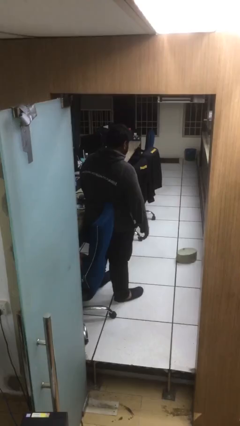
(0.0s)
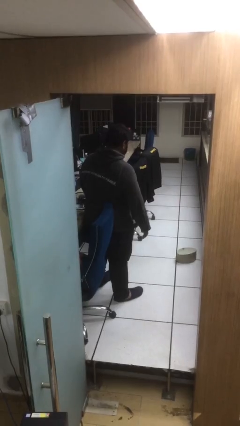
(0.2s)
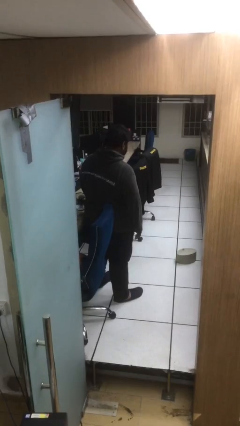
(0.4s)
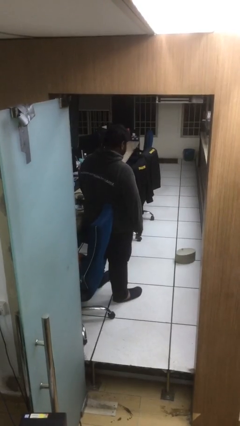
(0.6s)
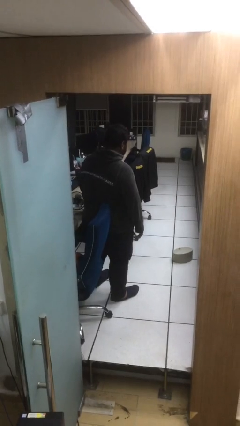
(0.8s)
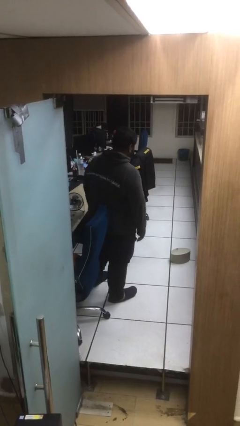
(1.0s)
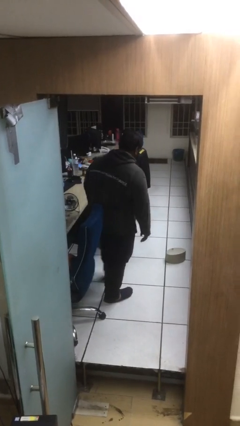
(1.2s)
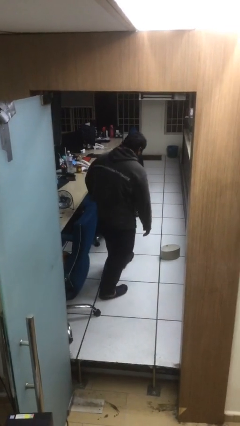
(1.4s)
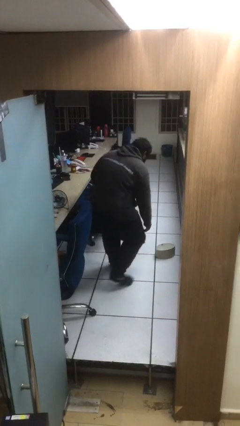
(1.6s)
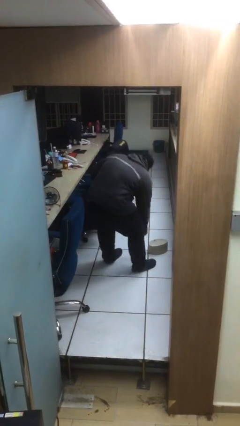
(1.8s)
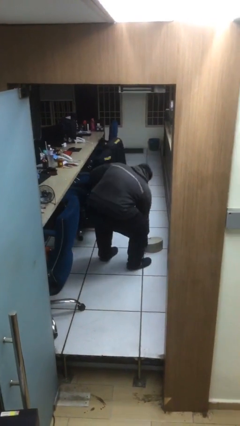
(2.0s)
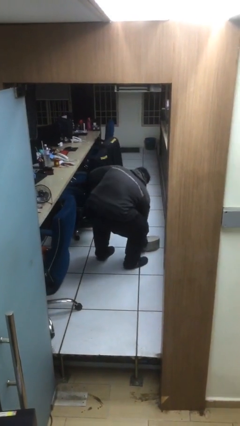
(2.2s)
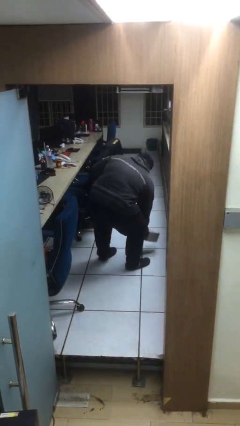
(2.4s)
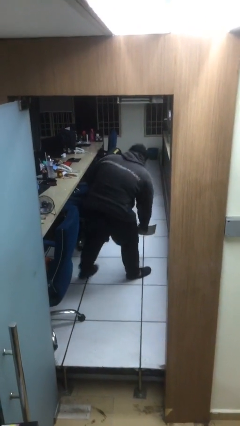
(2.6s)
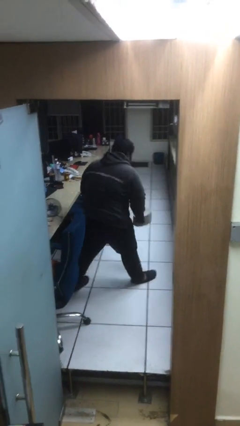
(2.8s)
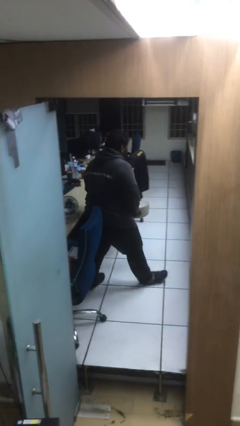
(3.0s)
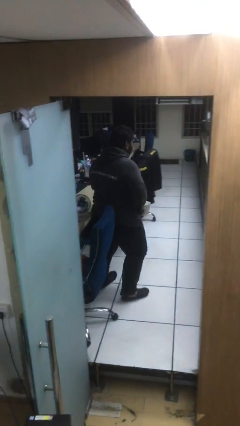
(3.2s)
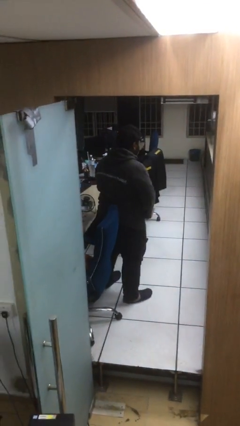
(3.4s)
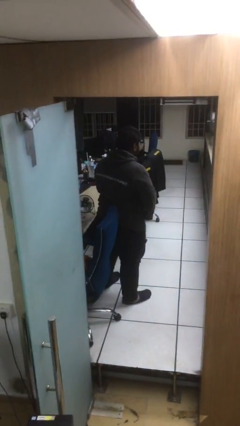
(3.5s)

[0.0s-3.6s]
person picks up object from floor

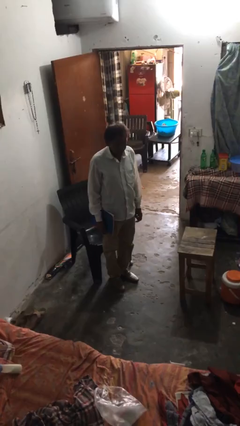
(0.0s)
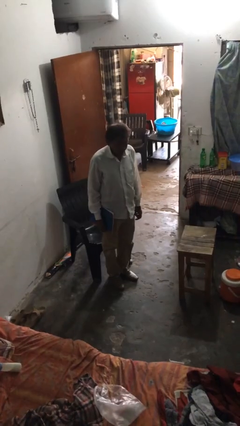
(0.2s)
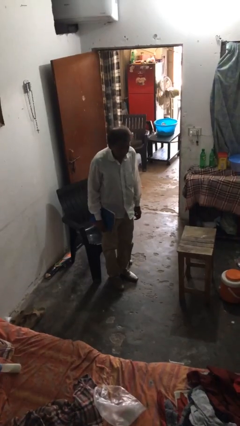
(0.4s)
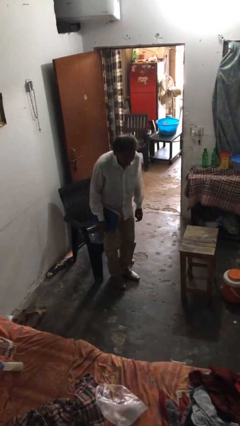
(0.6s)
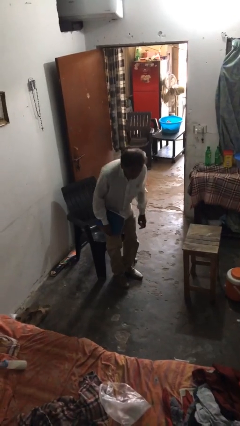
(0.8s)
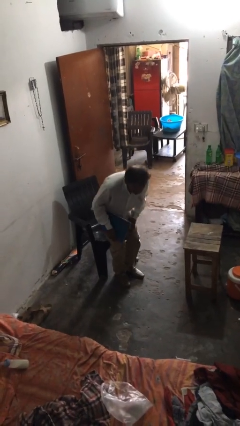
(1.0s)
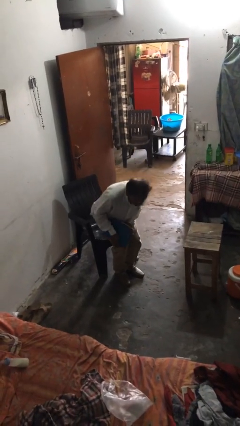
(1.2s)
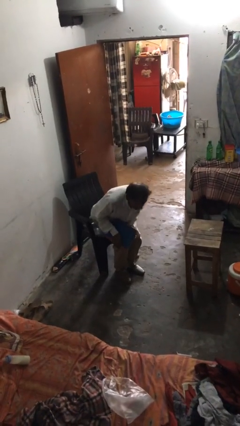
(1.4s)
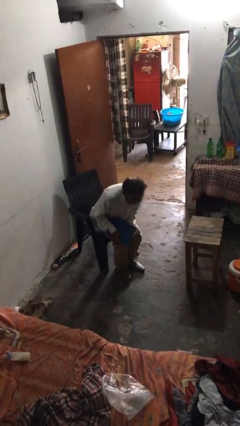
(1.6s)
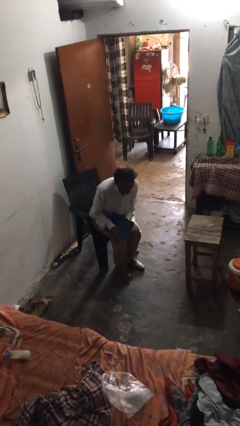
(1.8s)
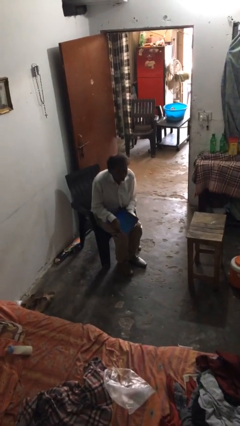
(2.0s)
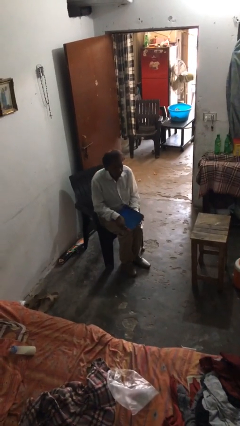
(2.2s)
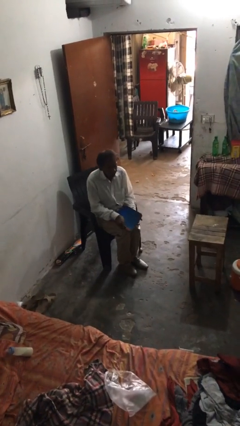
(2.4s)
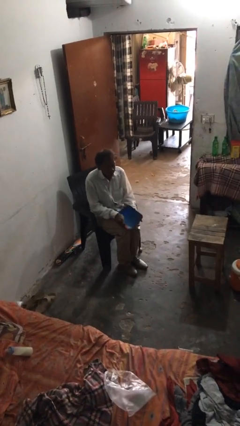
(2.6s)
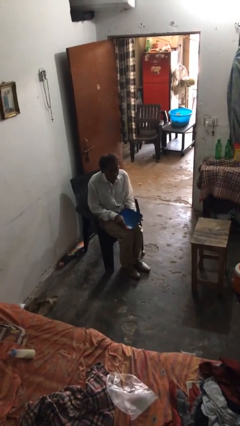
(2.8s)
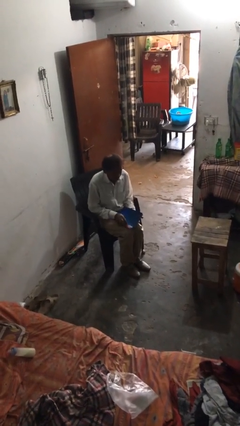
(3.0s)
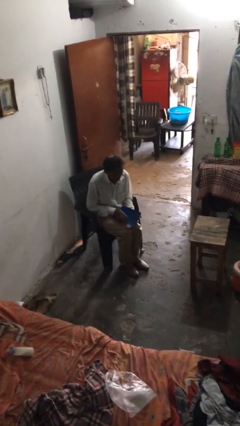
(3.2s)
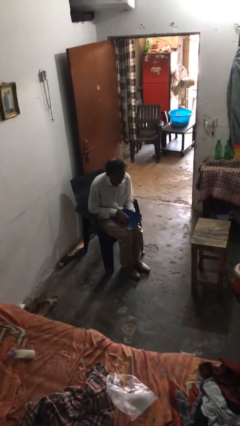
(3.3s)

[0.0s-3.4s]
person sits down

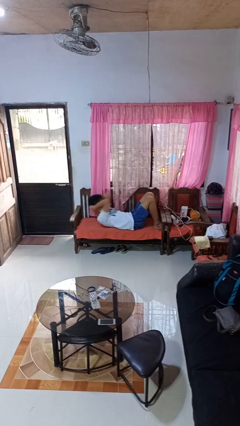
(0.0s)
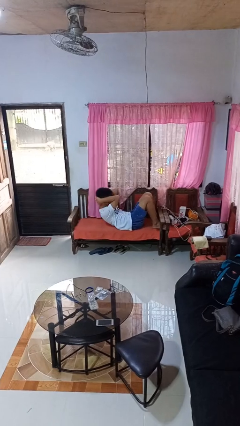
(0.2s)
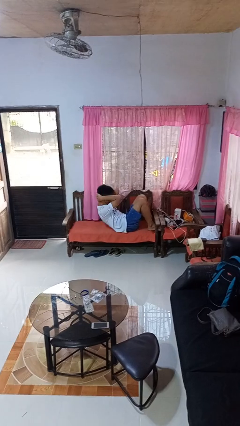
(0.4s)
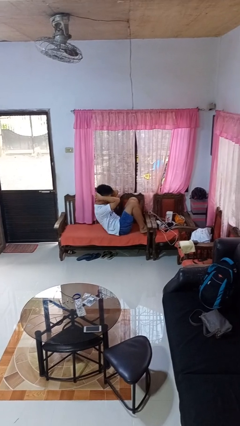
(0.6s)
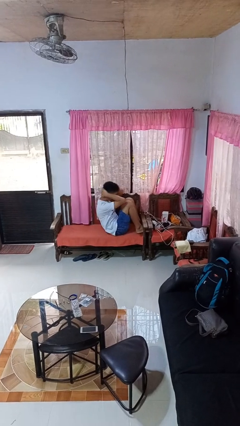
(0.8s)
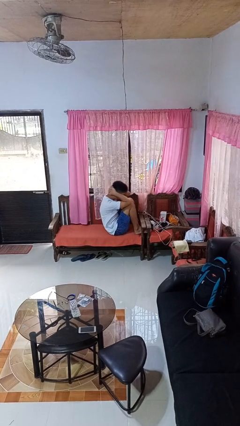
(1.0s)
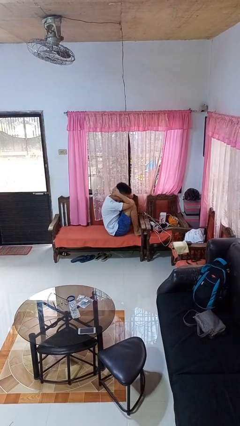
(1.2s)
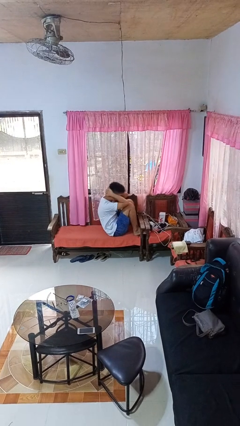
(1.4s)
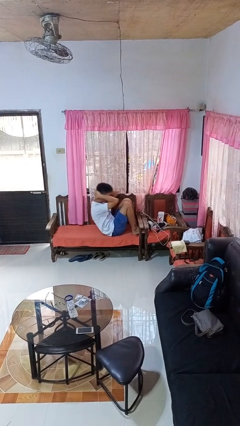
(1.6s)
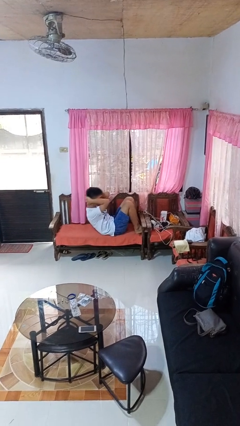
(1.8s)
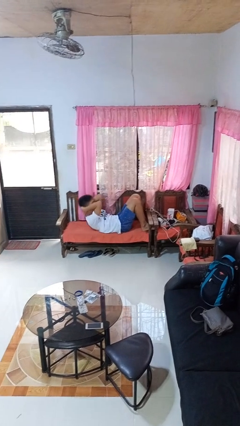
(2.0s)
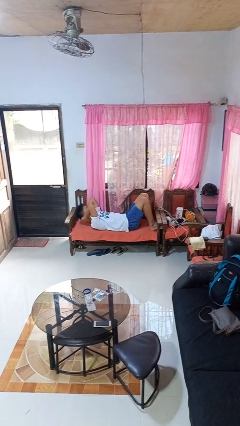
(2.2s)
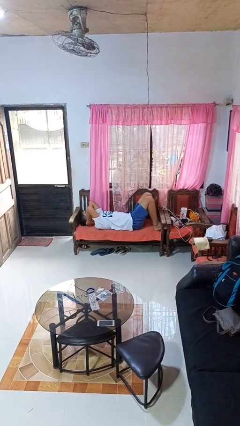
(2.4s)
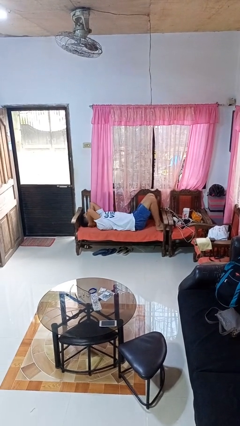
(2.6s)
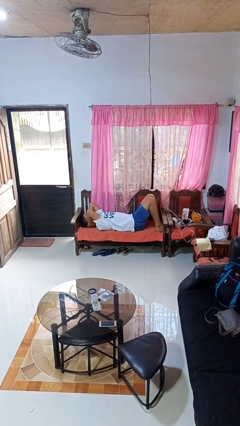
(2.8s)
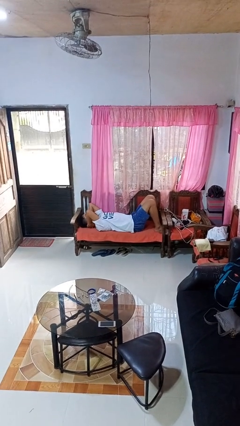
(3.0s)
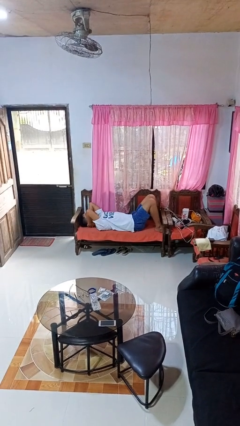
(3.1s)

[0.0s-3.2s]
person exercises with situp

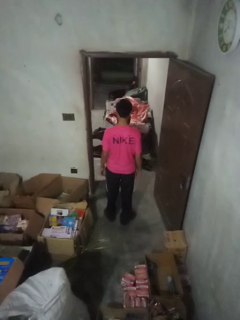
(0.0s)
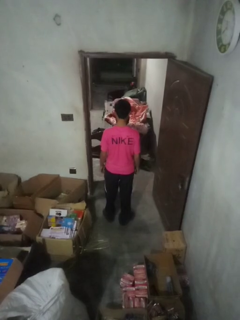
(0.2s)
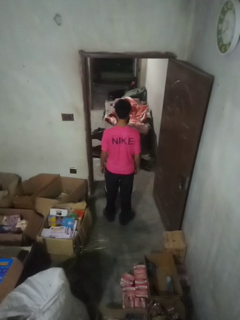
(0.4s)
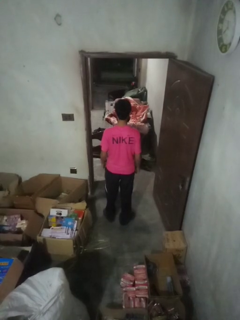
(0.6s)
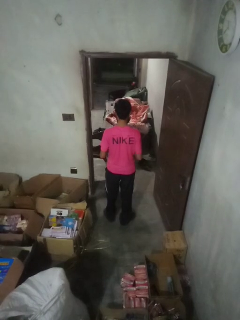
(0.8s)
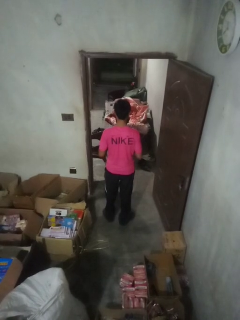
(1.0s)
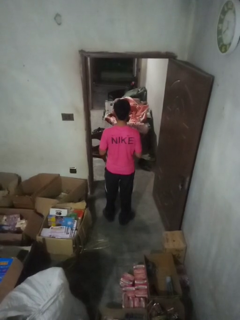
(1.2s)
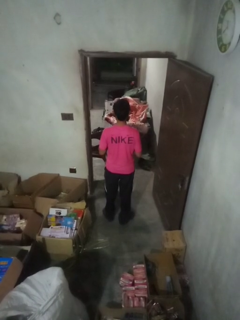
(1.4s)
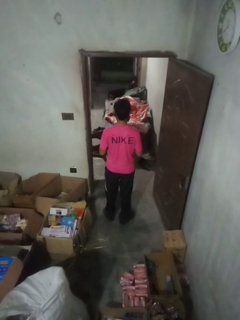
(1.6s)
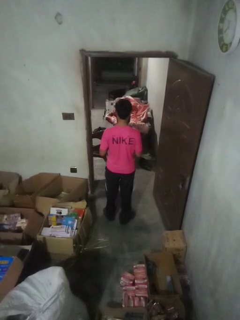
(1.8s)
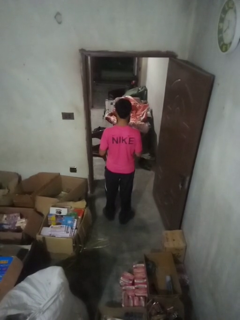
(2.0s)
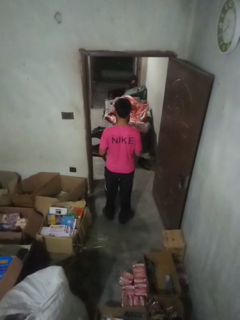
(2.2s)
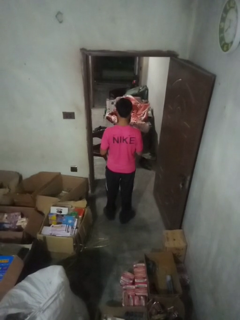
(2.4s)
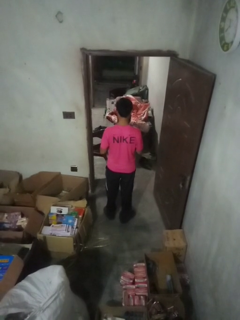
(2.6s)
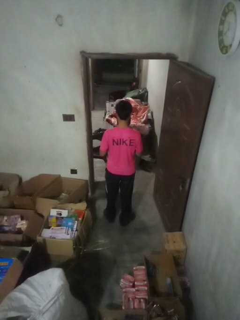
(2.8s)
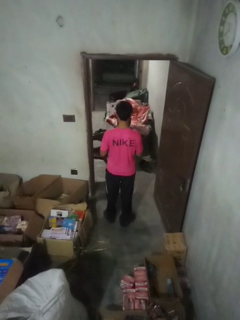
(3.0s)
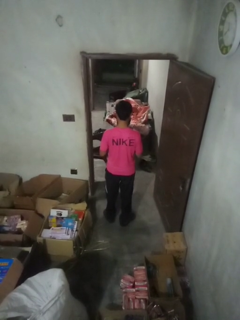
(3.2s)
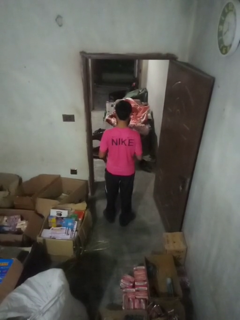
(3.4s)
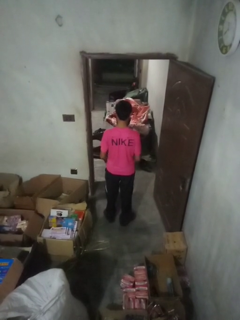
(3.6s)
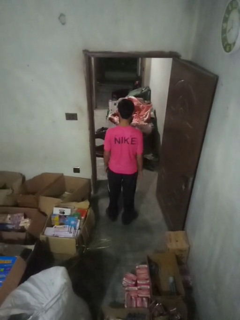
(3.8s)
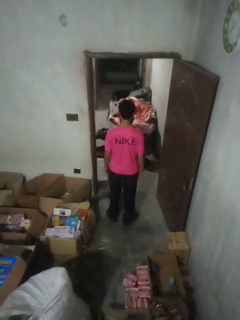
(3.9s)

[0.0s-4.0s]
person buttons shirt

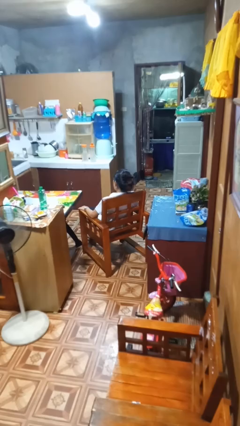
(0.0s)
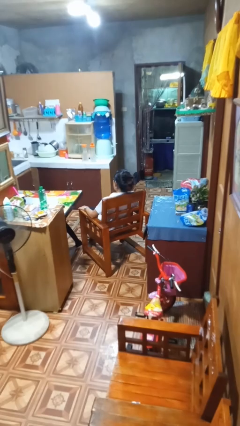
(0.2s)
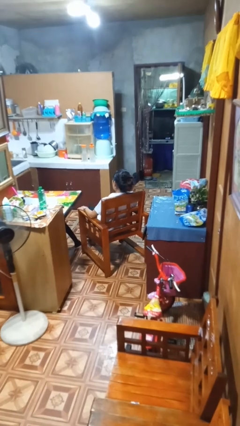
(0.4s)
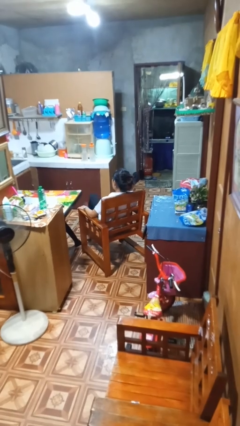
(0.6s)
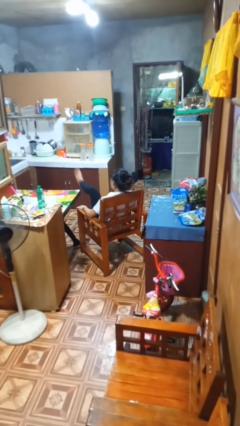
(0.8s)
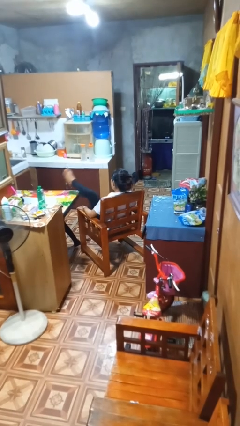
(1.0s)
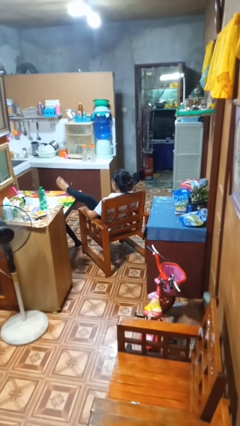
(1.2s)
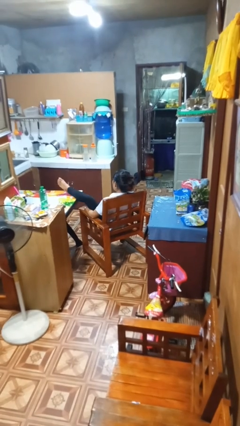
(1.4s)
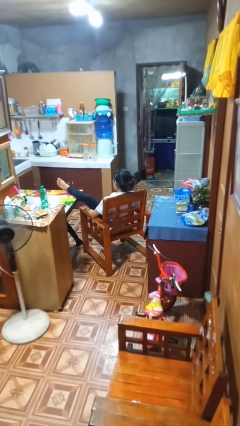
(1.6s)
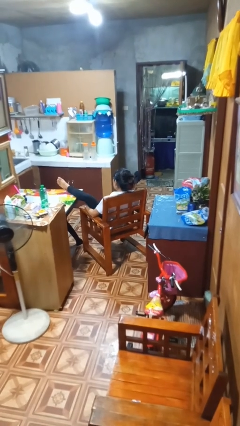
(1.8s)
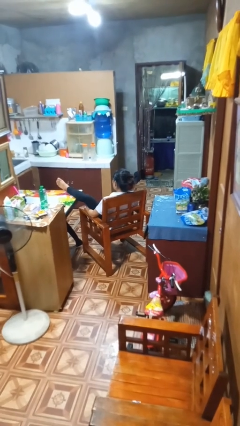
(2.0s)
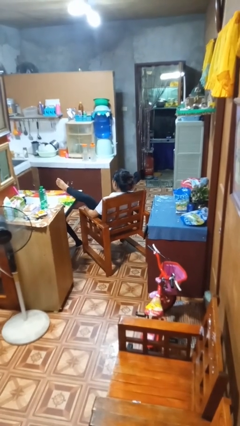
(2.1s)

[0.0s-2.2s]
person puts feet up

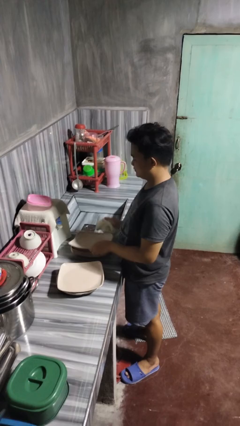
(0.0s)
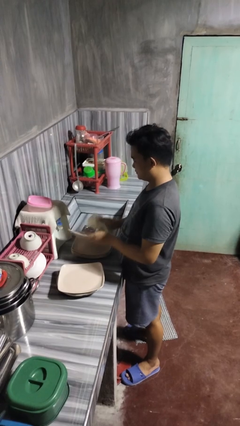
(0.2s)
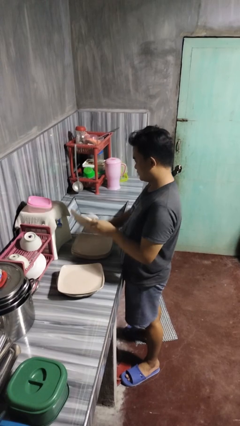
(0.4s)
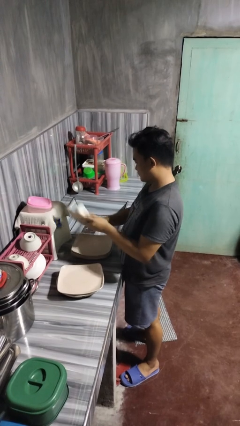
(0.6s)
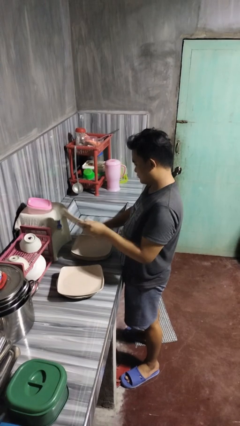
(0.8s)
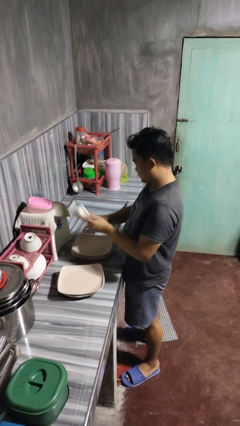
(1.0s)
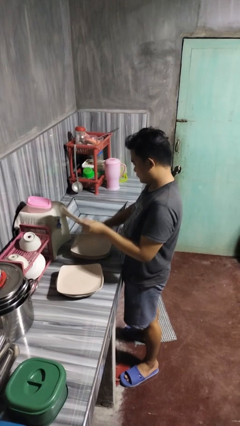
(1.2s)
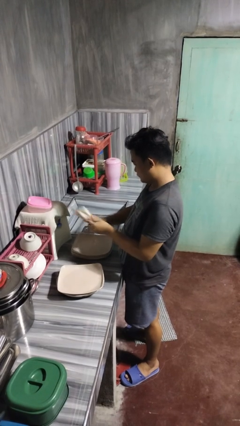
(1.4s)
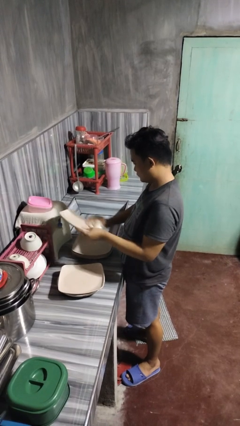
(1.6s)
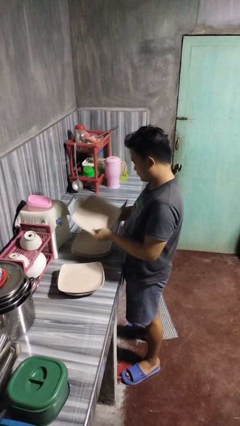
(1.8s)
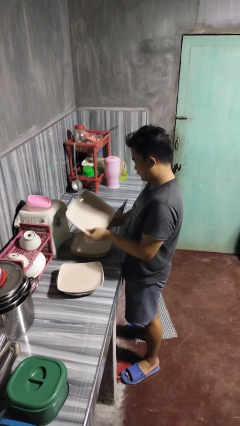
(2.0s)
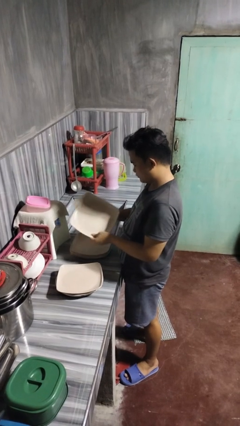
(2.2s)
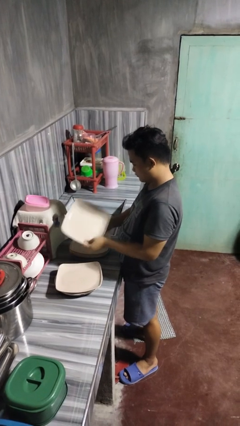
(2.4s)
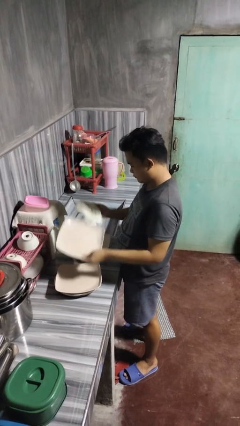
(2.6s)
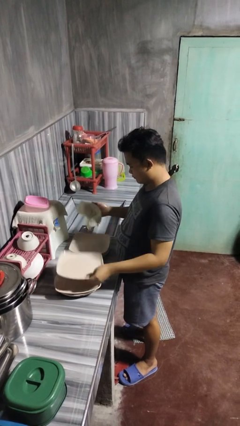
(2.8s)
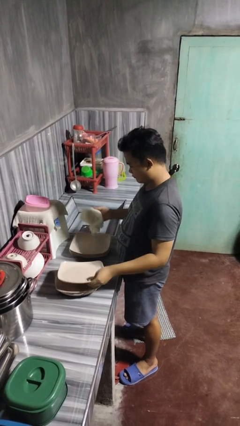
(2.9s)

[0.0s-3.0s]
person dries dish
